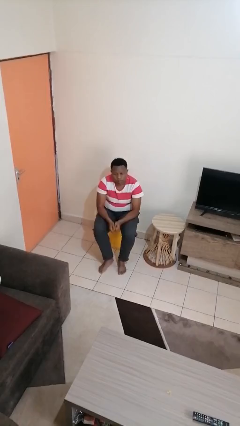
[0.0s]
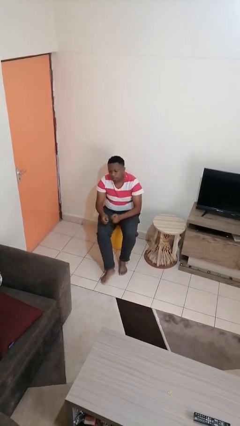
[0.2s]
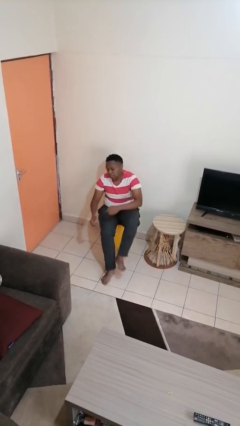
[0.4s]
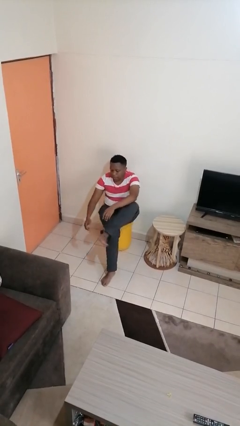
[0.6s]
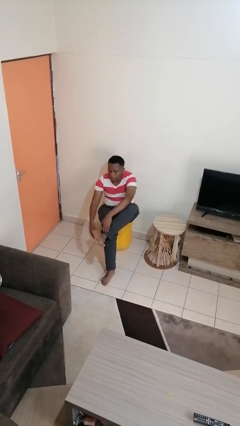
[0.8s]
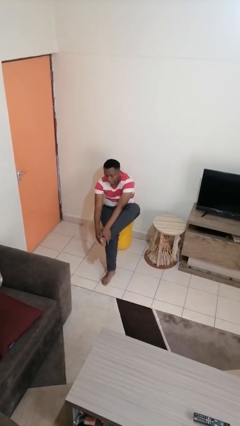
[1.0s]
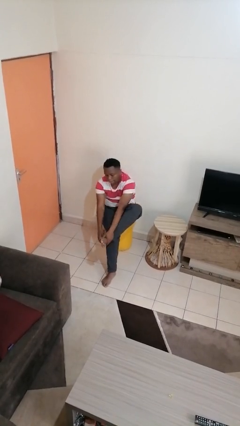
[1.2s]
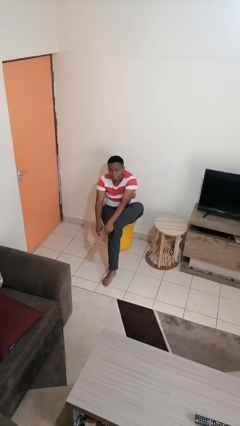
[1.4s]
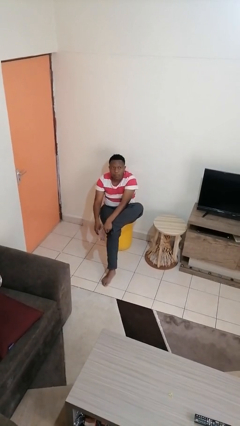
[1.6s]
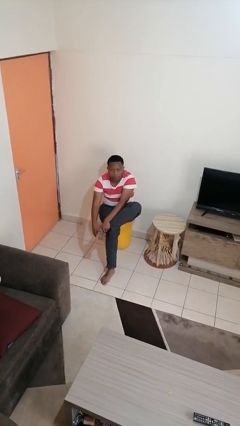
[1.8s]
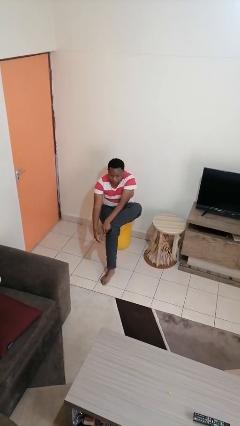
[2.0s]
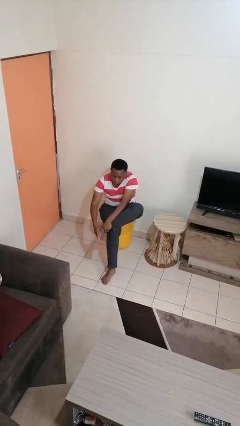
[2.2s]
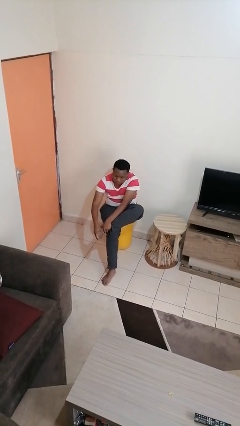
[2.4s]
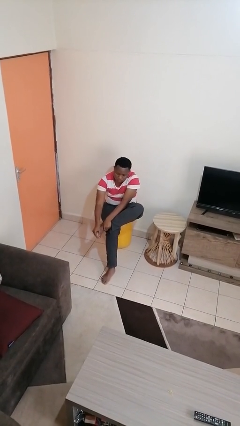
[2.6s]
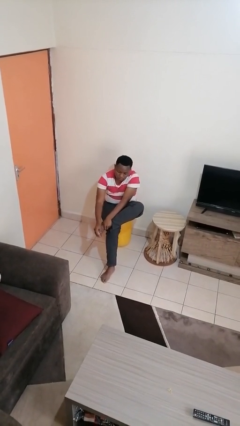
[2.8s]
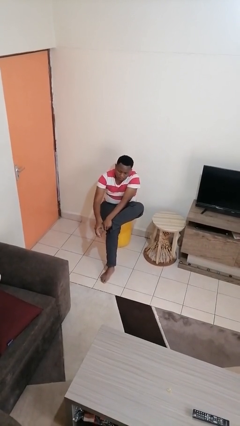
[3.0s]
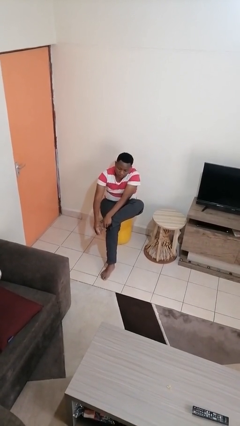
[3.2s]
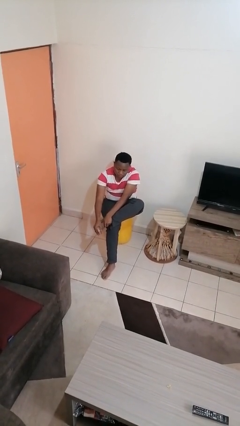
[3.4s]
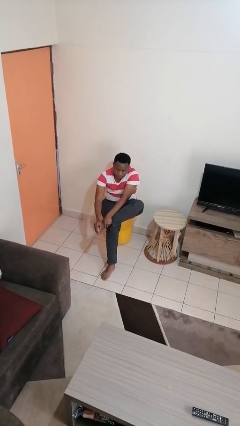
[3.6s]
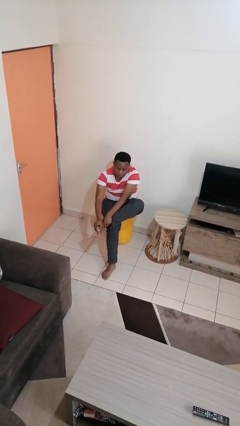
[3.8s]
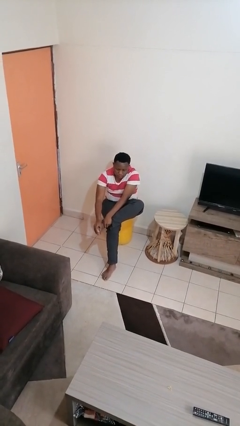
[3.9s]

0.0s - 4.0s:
person rubs foot

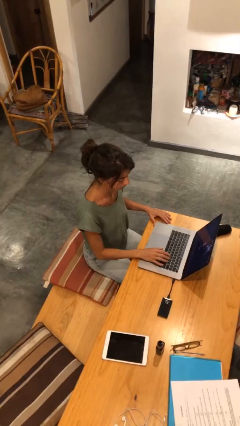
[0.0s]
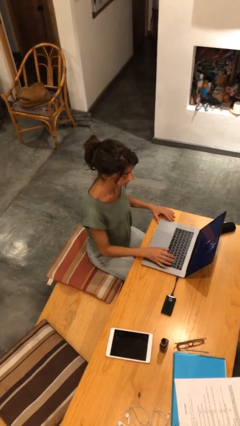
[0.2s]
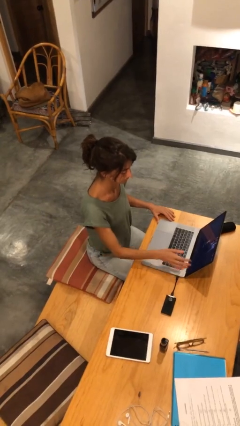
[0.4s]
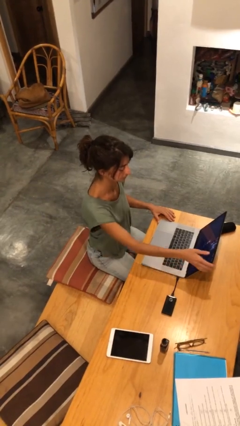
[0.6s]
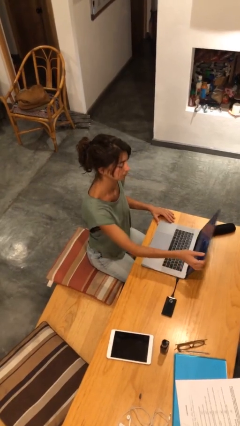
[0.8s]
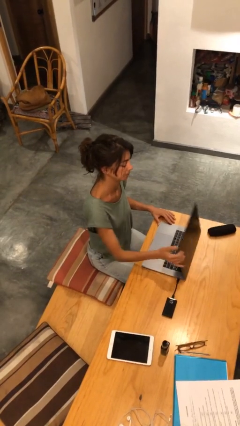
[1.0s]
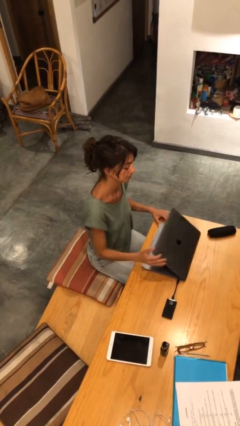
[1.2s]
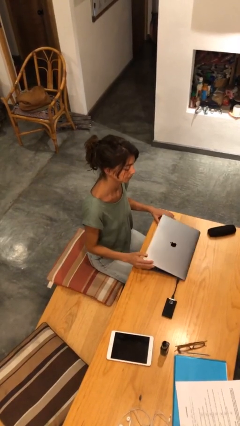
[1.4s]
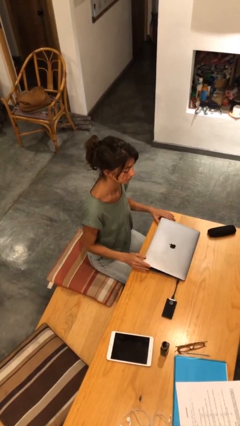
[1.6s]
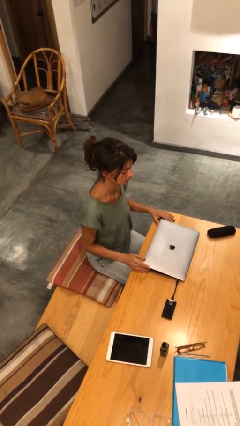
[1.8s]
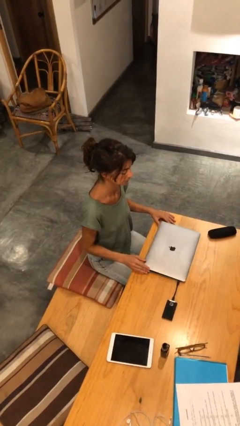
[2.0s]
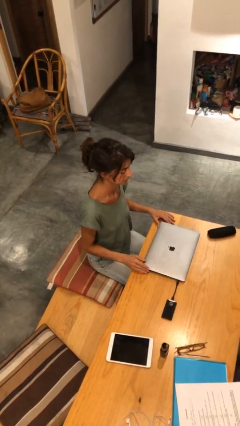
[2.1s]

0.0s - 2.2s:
person closes laptop

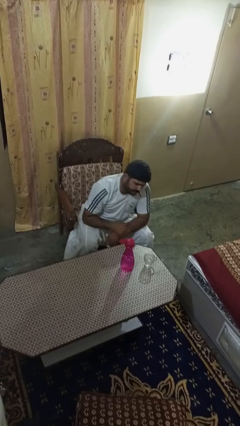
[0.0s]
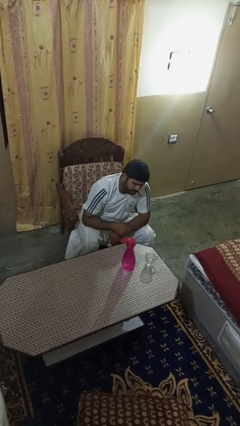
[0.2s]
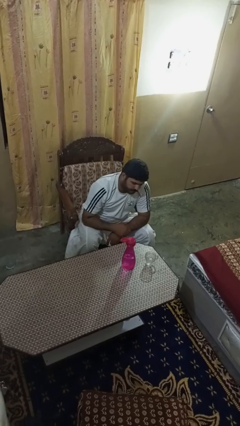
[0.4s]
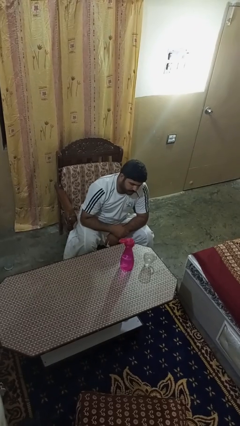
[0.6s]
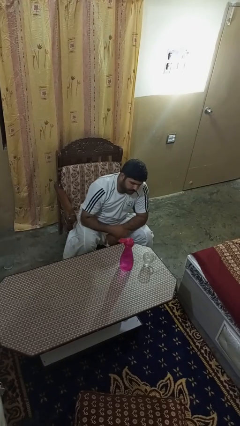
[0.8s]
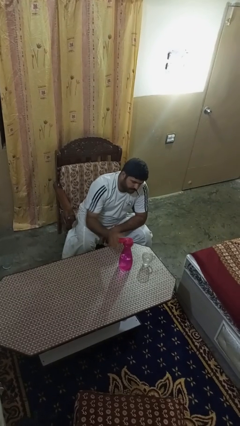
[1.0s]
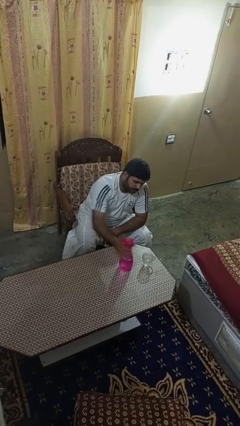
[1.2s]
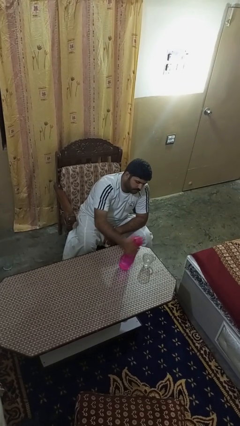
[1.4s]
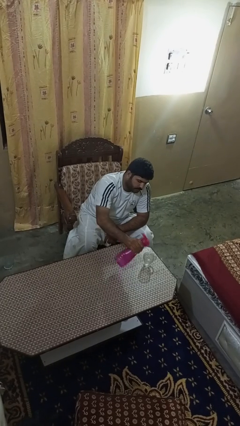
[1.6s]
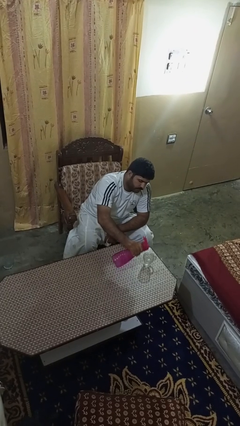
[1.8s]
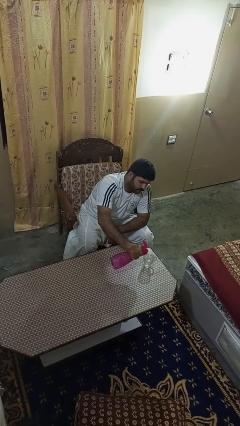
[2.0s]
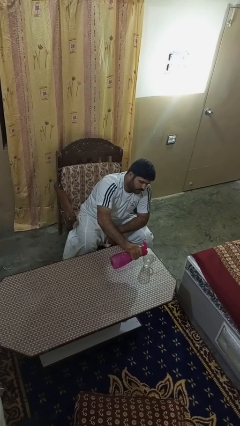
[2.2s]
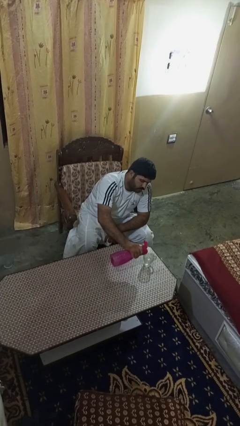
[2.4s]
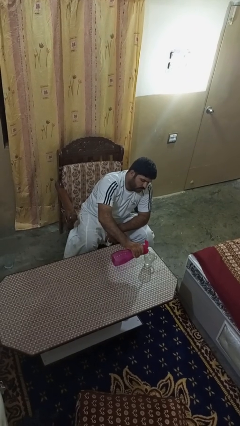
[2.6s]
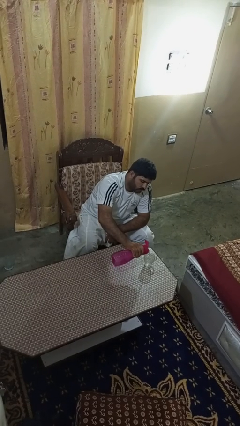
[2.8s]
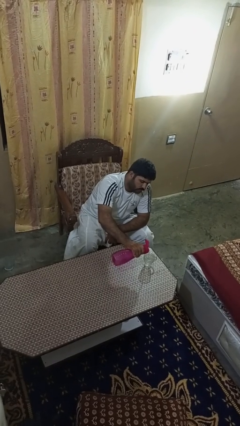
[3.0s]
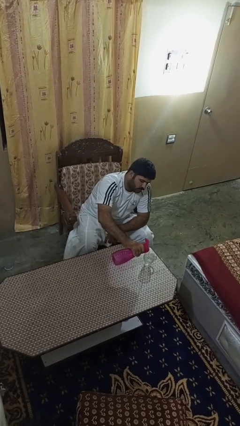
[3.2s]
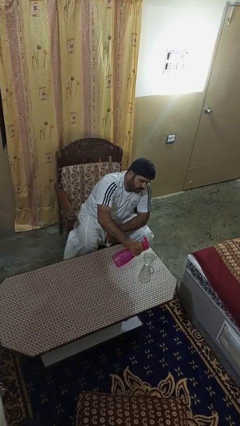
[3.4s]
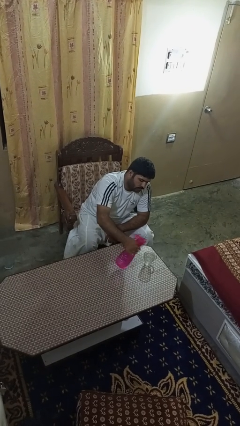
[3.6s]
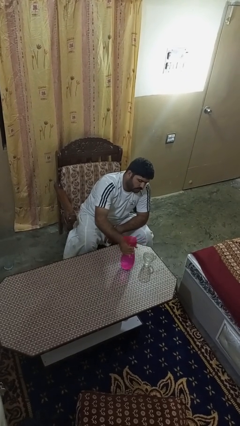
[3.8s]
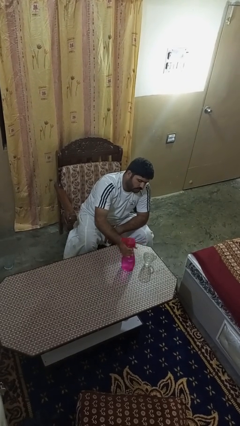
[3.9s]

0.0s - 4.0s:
person pours liquid into cup

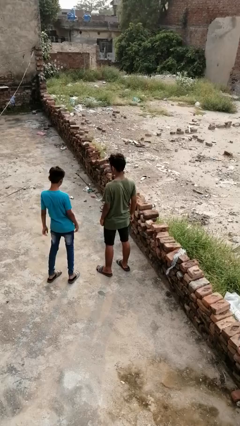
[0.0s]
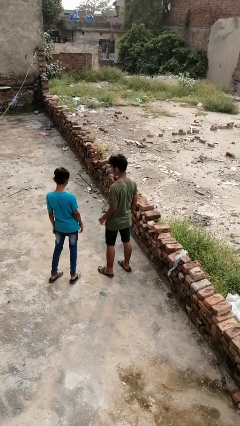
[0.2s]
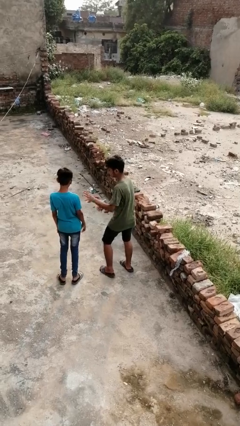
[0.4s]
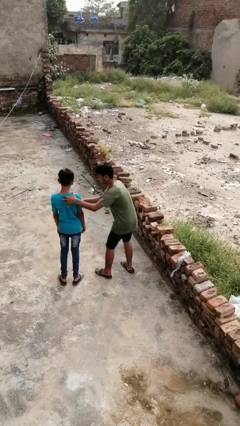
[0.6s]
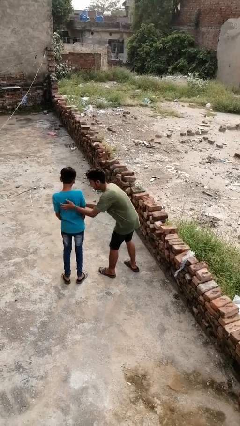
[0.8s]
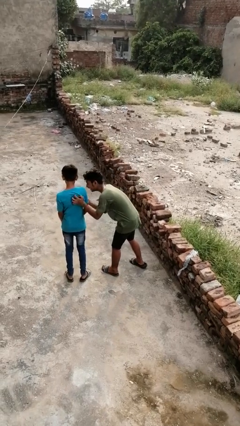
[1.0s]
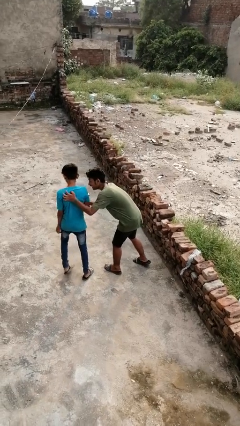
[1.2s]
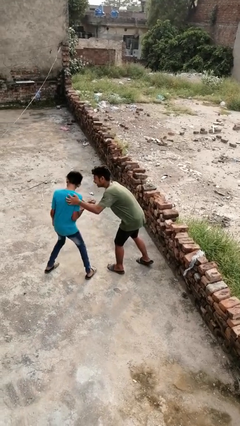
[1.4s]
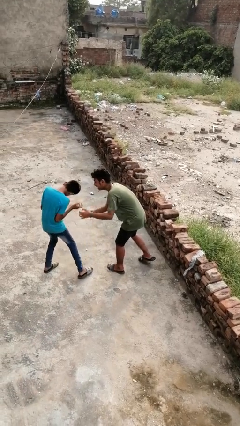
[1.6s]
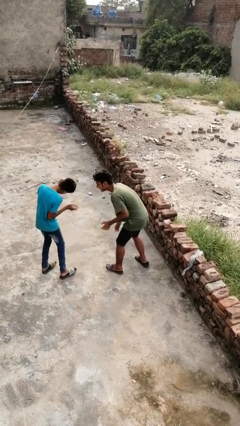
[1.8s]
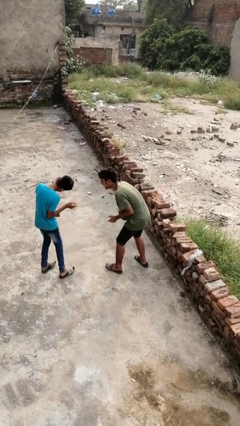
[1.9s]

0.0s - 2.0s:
person tickles person

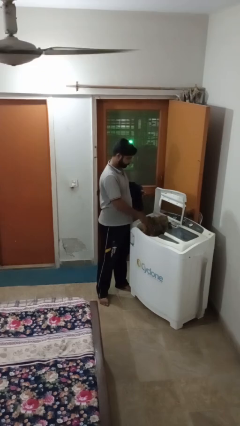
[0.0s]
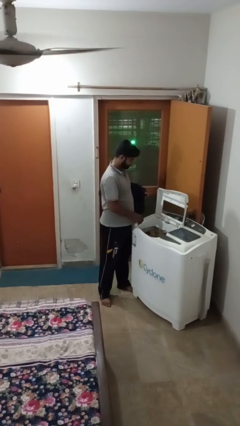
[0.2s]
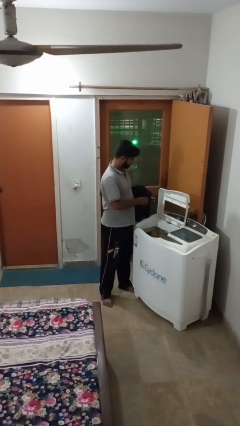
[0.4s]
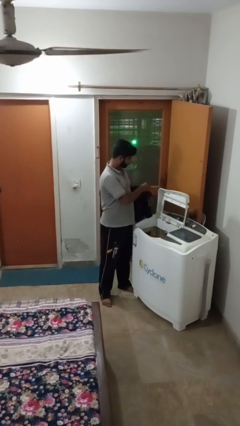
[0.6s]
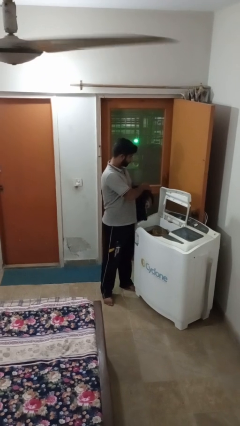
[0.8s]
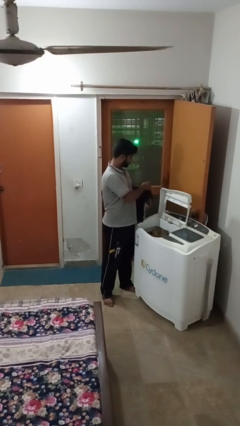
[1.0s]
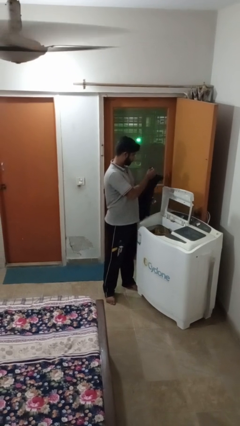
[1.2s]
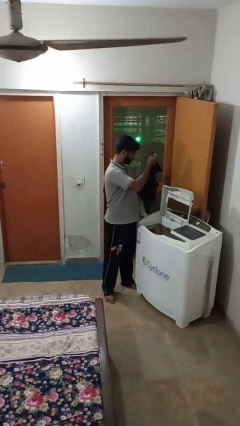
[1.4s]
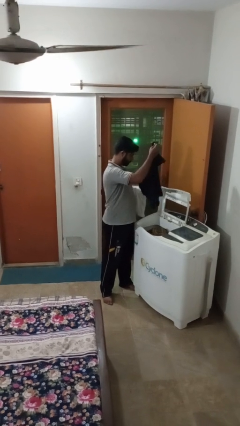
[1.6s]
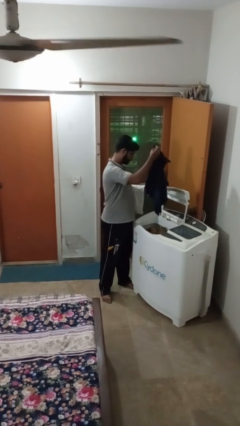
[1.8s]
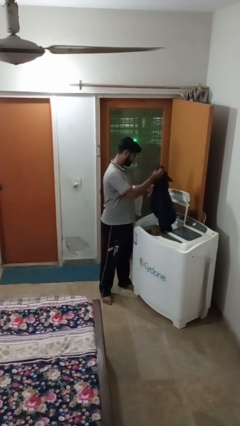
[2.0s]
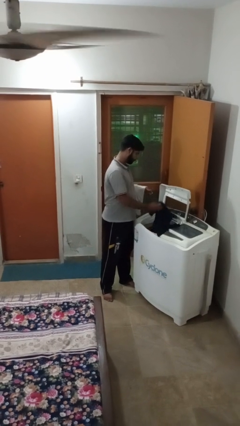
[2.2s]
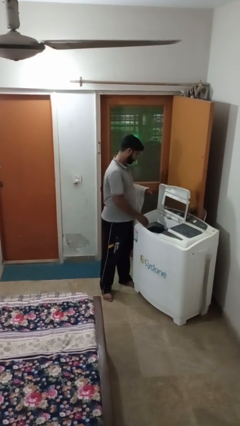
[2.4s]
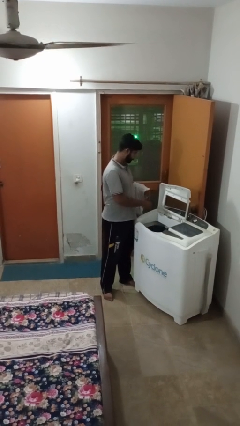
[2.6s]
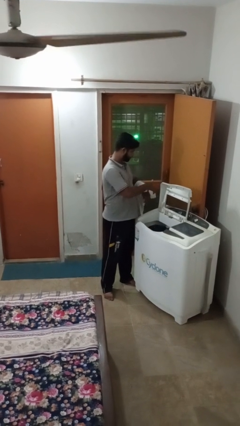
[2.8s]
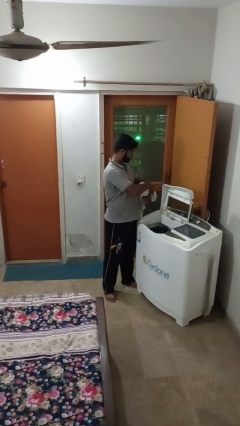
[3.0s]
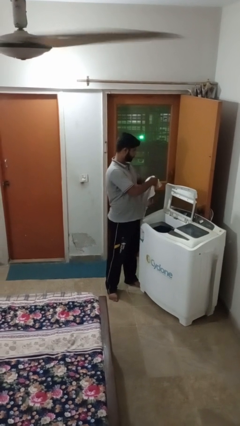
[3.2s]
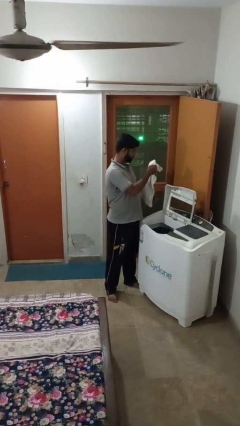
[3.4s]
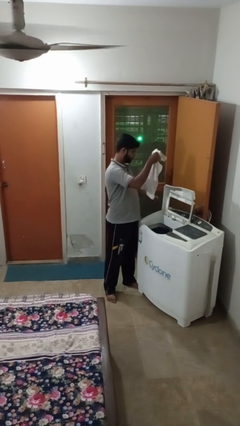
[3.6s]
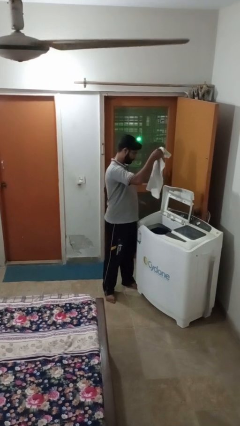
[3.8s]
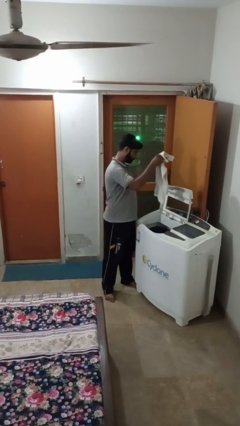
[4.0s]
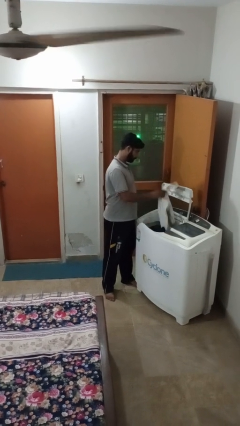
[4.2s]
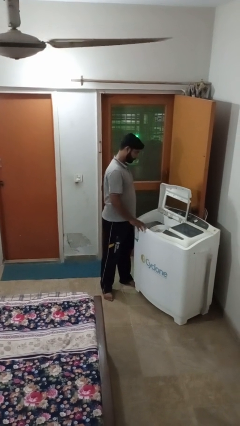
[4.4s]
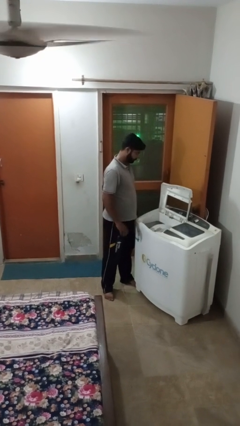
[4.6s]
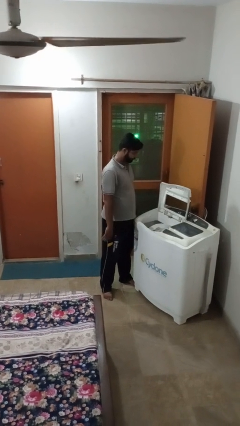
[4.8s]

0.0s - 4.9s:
person loads clotheswasher

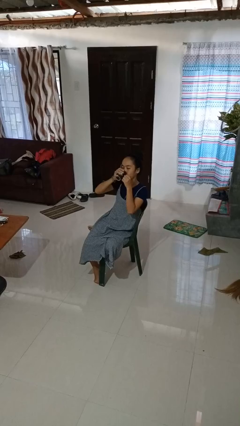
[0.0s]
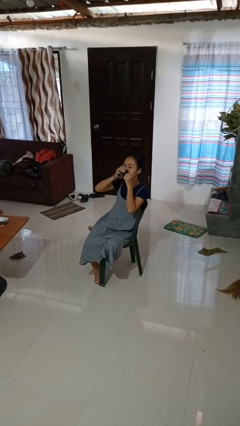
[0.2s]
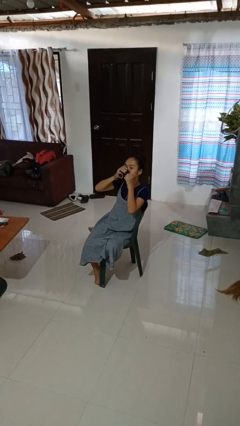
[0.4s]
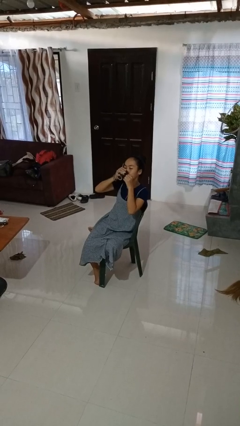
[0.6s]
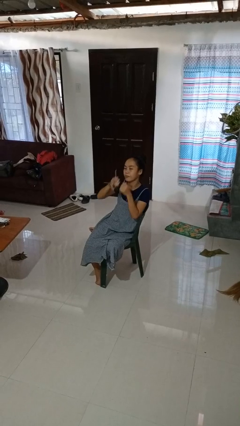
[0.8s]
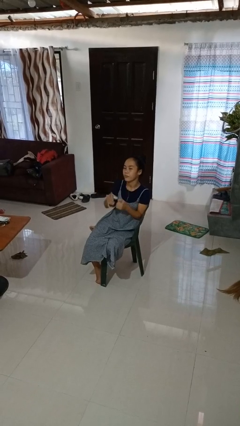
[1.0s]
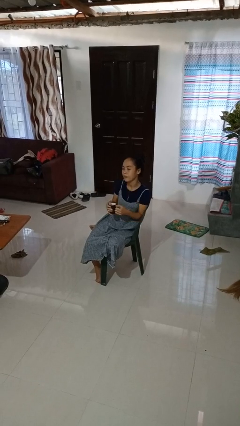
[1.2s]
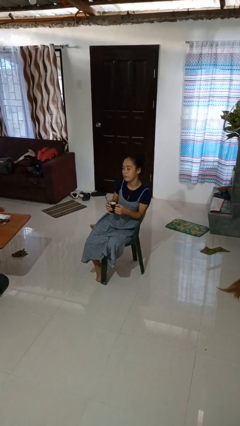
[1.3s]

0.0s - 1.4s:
person drinks from mug
